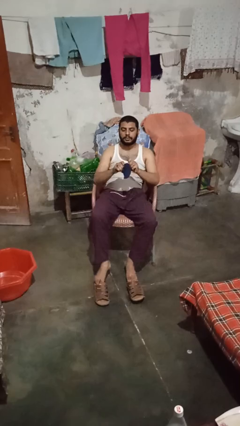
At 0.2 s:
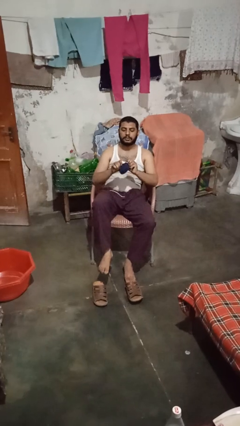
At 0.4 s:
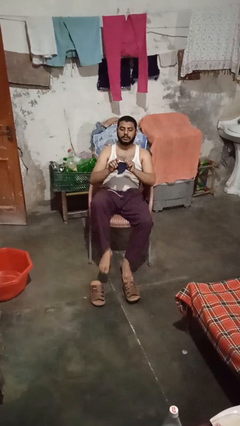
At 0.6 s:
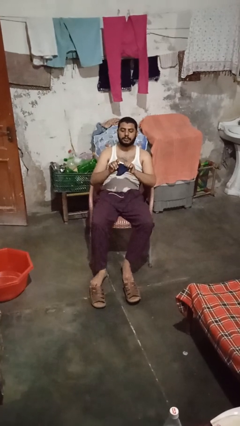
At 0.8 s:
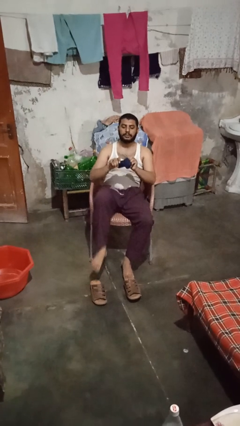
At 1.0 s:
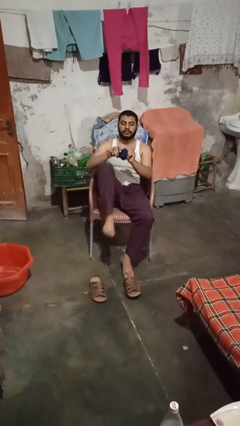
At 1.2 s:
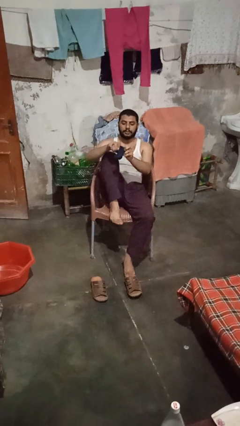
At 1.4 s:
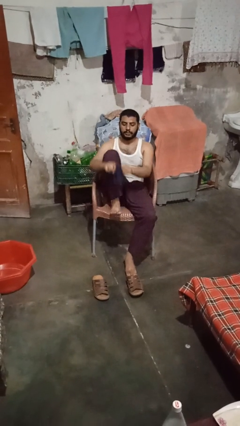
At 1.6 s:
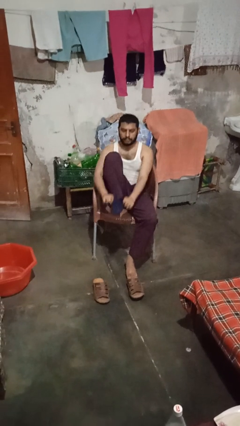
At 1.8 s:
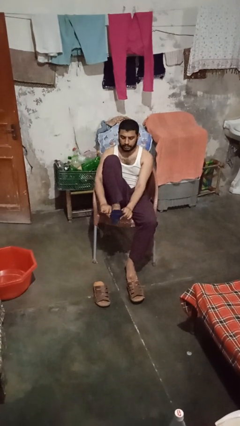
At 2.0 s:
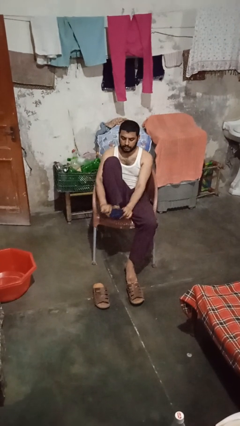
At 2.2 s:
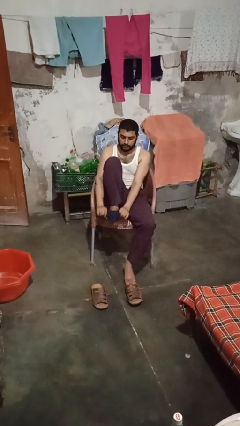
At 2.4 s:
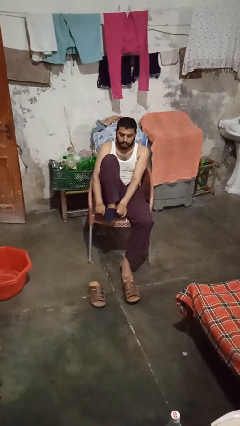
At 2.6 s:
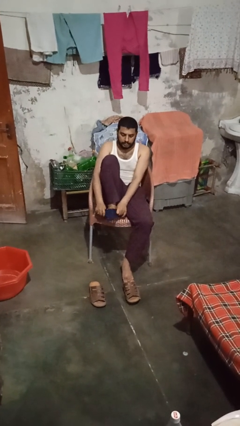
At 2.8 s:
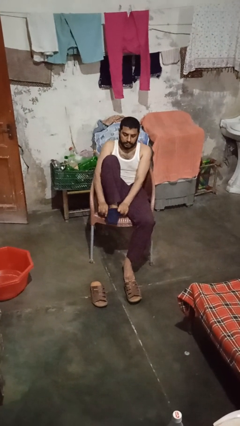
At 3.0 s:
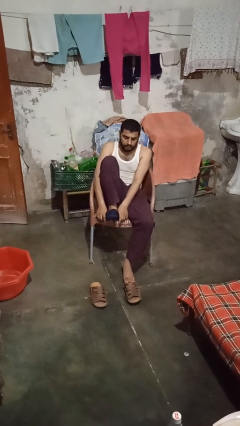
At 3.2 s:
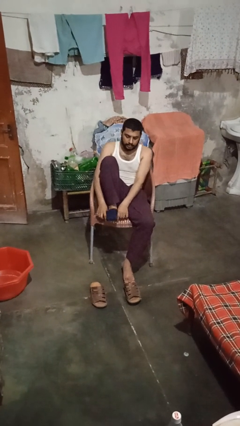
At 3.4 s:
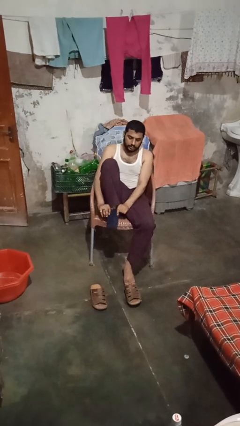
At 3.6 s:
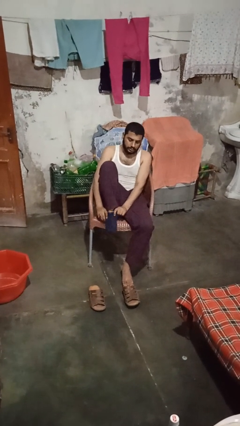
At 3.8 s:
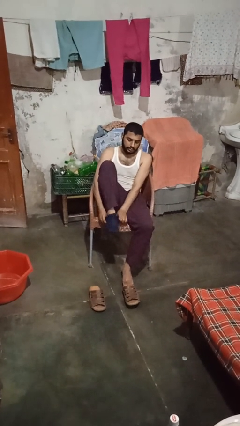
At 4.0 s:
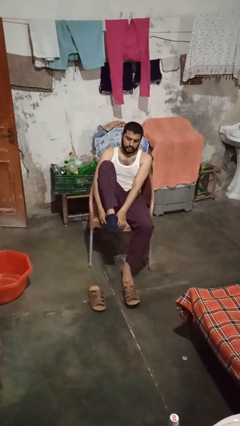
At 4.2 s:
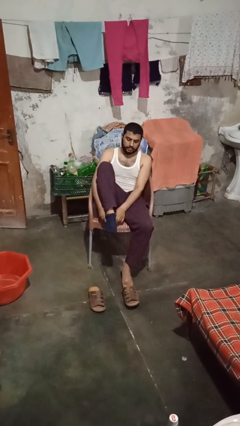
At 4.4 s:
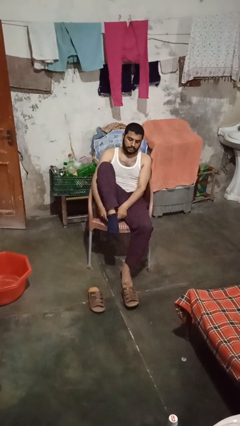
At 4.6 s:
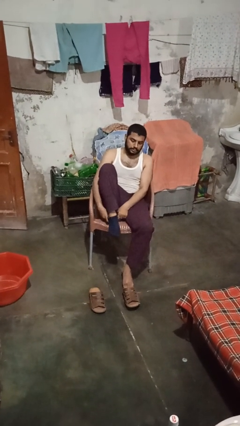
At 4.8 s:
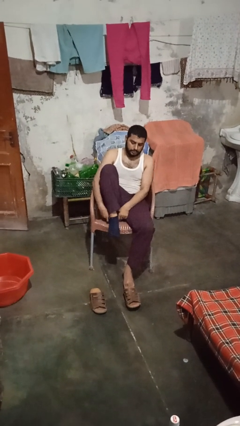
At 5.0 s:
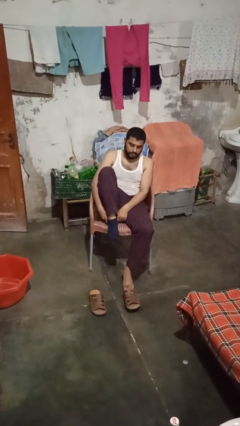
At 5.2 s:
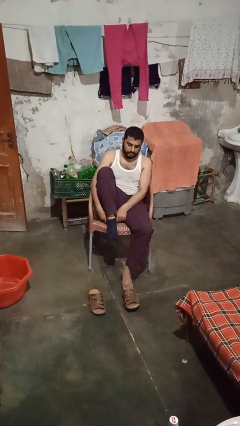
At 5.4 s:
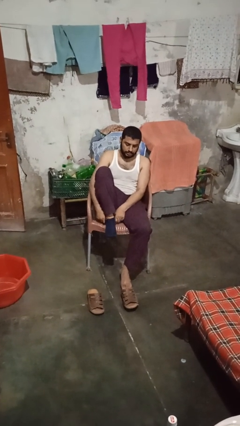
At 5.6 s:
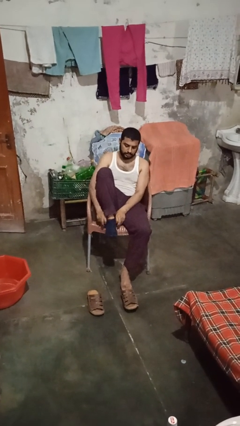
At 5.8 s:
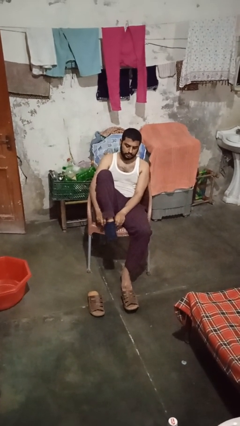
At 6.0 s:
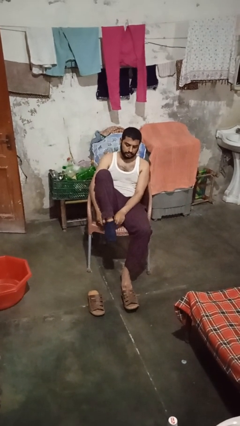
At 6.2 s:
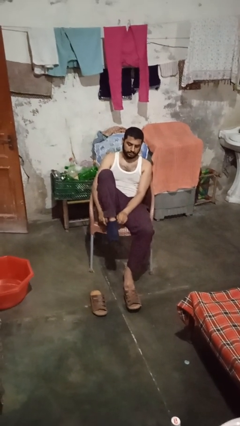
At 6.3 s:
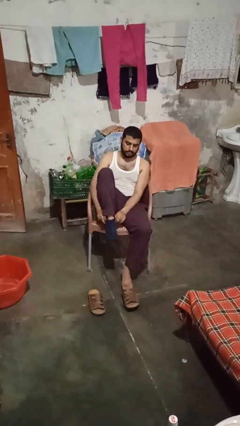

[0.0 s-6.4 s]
person puts on socks

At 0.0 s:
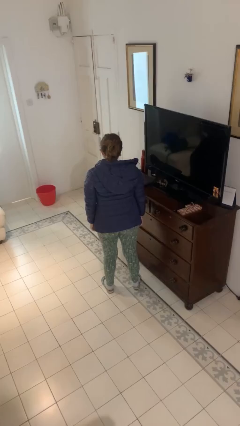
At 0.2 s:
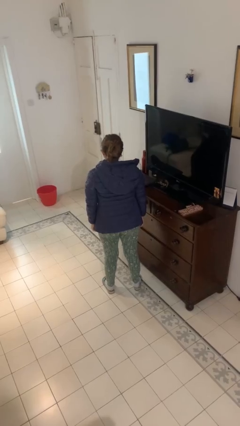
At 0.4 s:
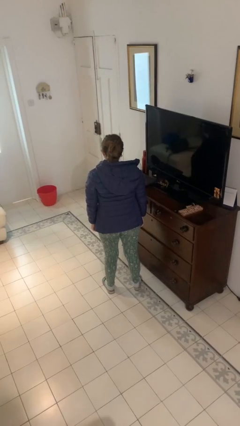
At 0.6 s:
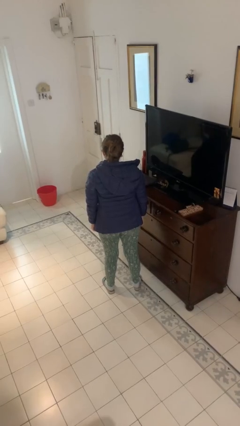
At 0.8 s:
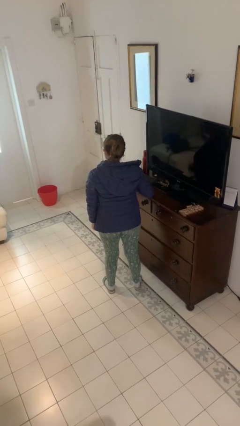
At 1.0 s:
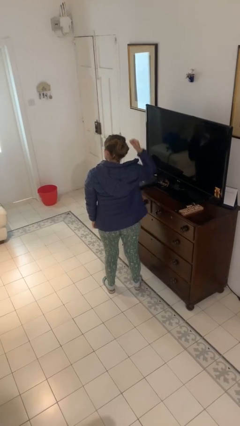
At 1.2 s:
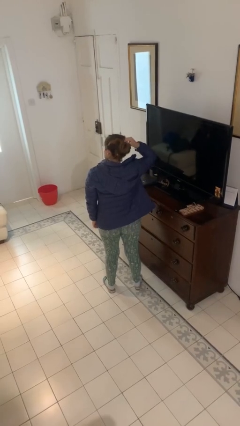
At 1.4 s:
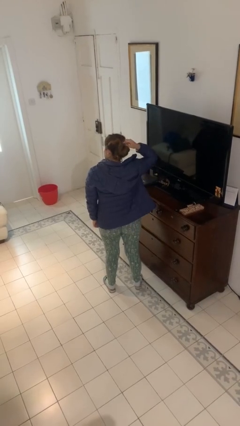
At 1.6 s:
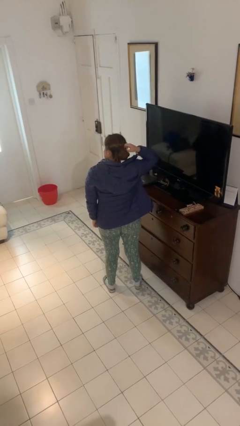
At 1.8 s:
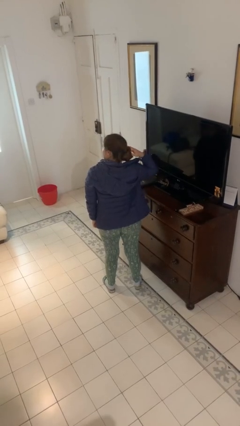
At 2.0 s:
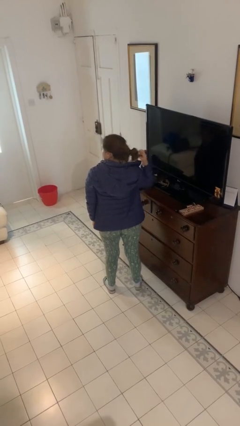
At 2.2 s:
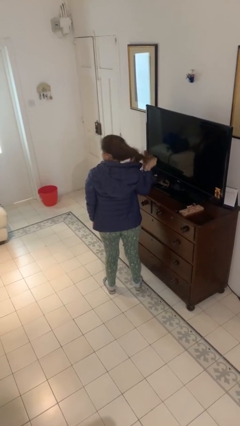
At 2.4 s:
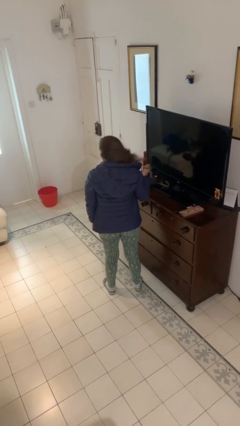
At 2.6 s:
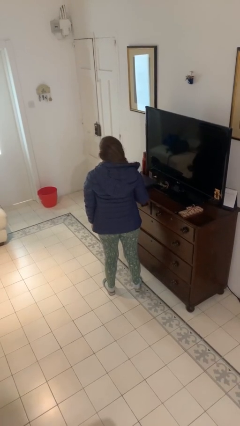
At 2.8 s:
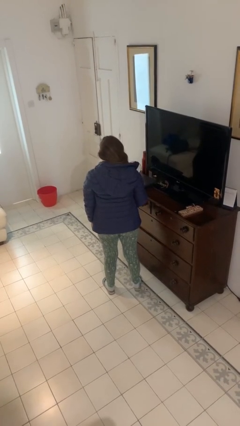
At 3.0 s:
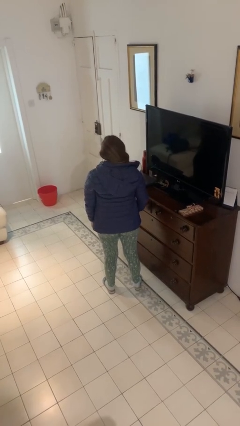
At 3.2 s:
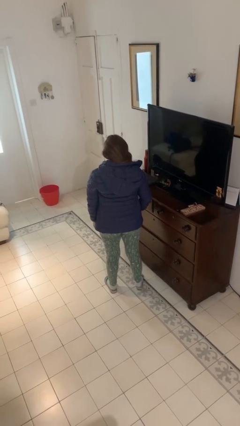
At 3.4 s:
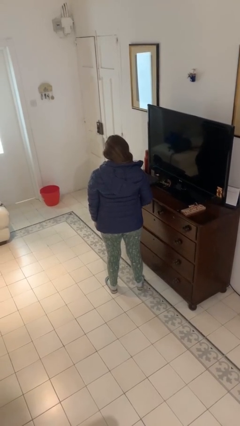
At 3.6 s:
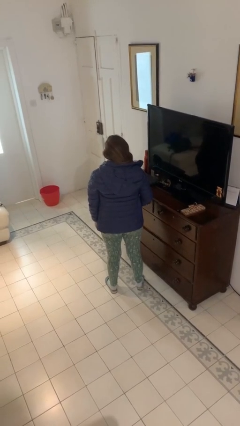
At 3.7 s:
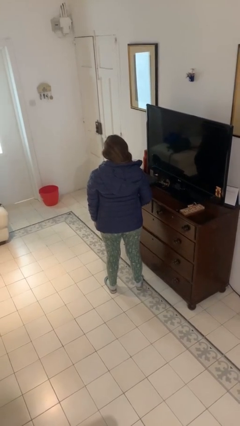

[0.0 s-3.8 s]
person takes off hairtie

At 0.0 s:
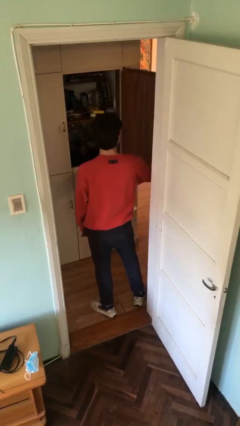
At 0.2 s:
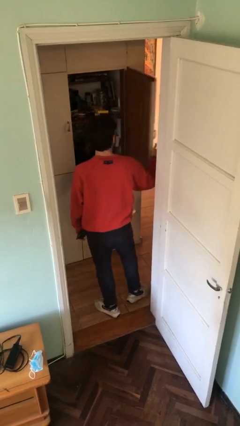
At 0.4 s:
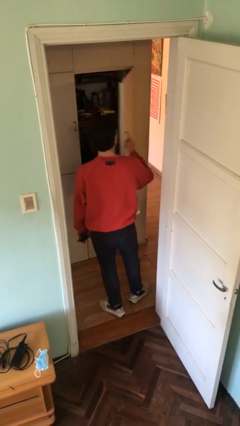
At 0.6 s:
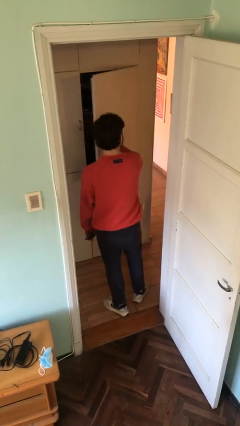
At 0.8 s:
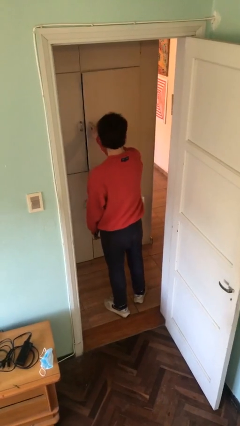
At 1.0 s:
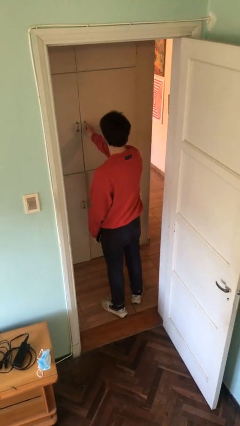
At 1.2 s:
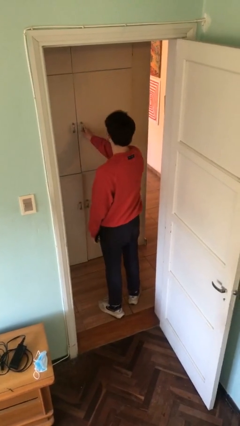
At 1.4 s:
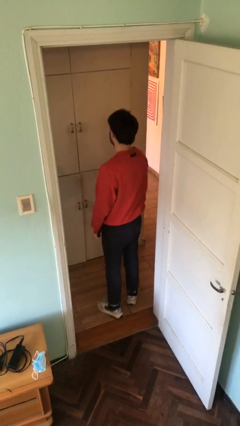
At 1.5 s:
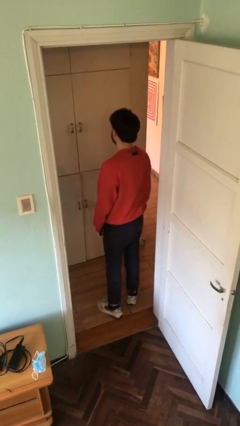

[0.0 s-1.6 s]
person closes closet door

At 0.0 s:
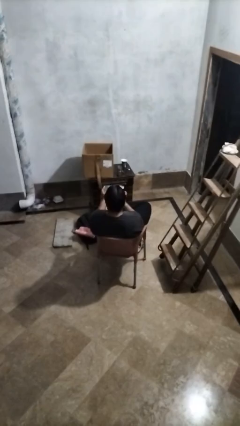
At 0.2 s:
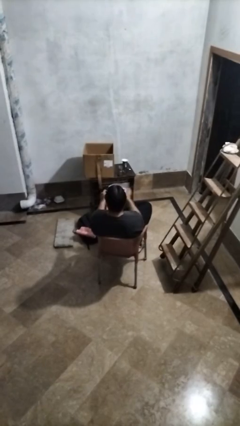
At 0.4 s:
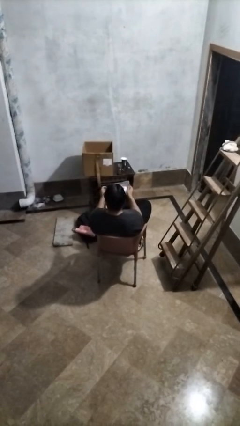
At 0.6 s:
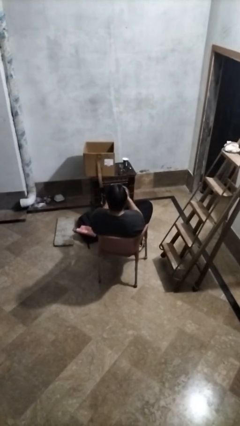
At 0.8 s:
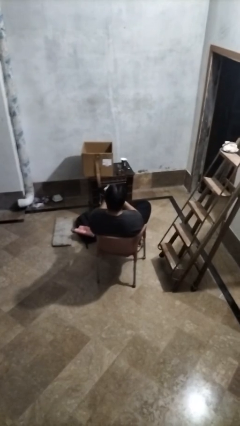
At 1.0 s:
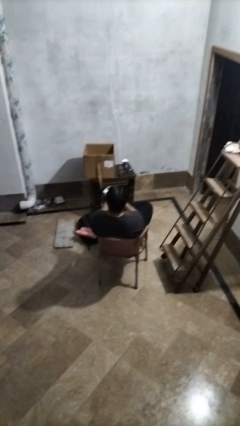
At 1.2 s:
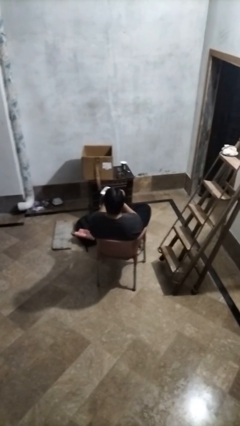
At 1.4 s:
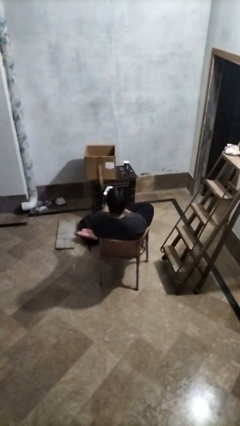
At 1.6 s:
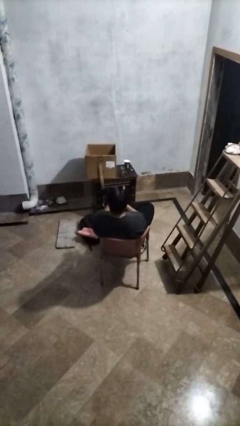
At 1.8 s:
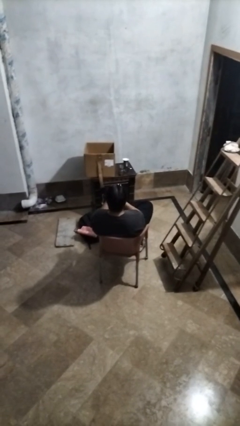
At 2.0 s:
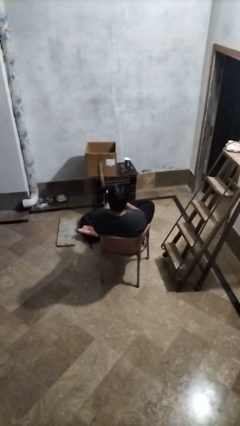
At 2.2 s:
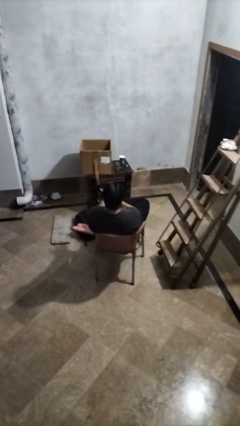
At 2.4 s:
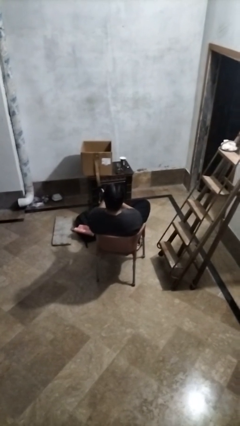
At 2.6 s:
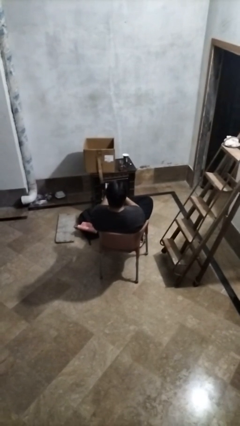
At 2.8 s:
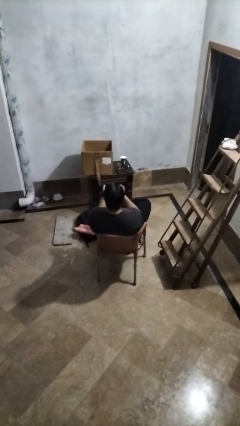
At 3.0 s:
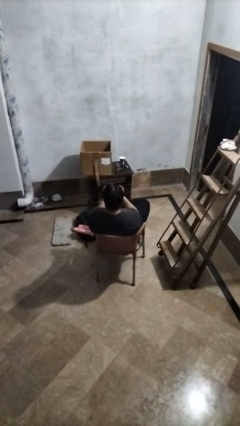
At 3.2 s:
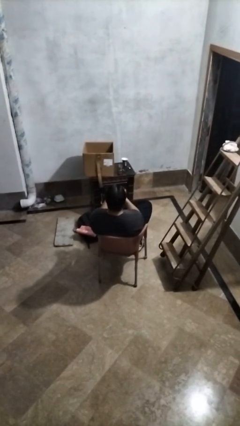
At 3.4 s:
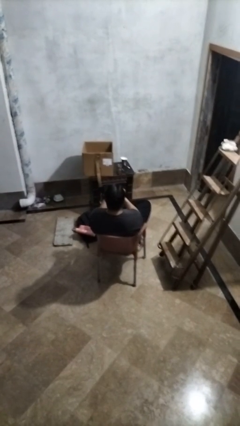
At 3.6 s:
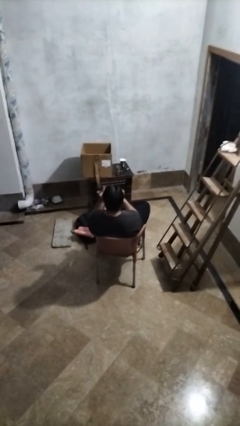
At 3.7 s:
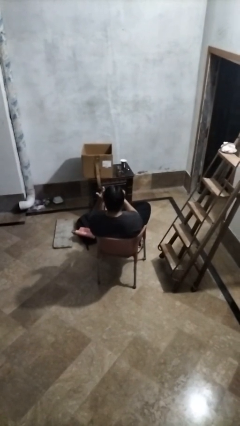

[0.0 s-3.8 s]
person crumples paper

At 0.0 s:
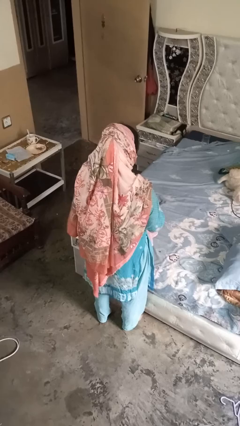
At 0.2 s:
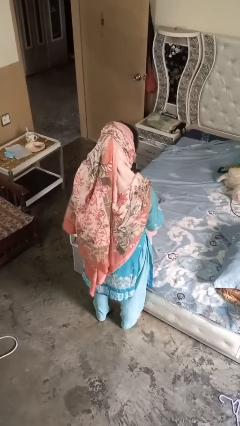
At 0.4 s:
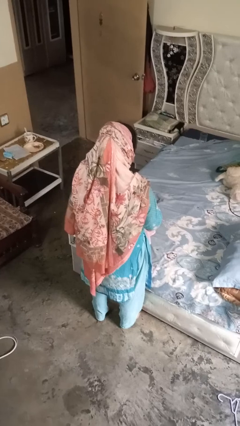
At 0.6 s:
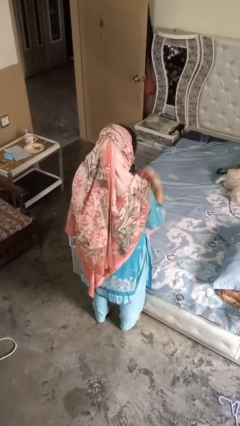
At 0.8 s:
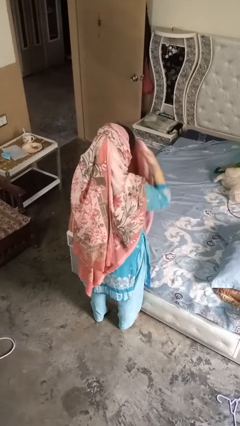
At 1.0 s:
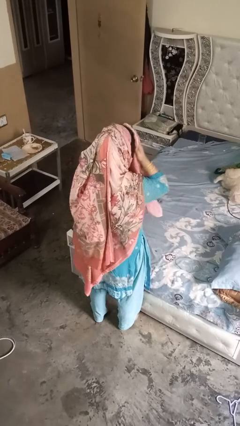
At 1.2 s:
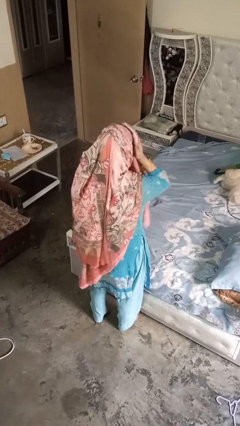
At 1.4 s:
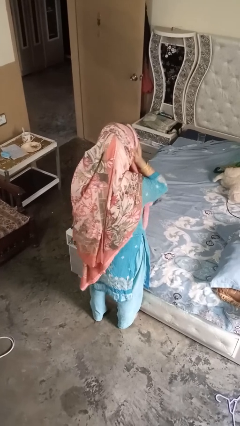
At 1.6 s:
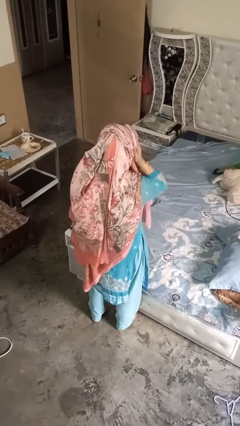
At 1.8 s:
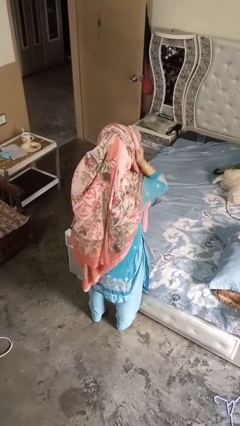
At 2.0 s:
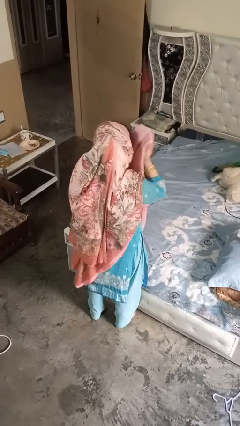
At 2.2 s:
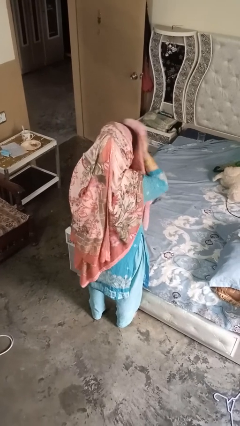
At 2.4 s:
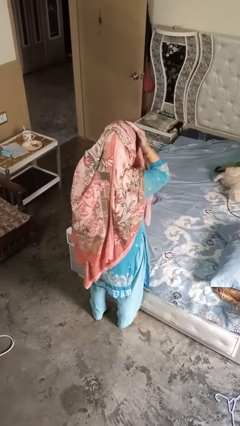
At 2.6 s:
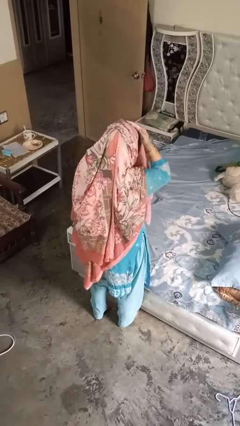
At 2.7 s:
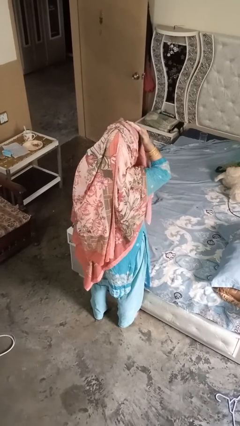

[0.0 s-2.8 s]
person dries hair with hairdryer
